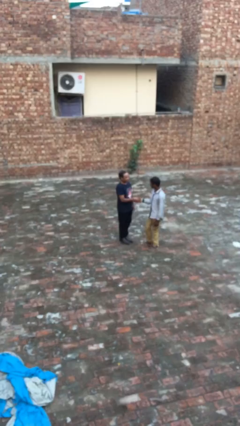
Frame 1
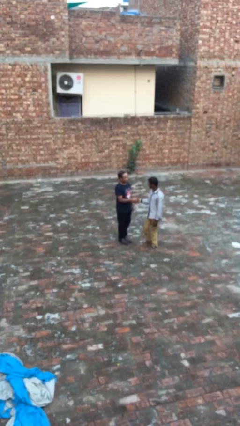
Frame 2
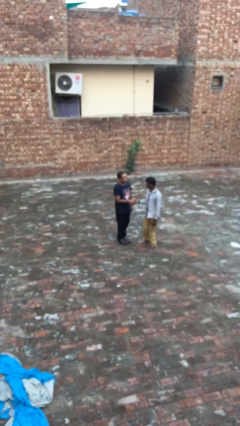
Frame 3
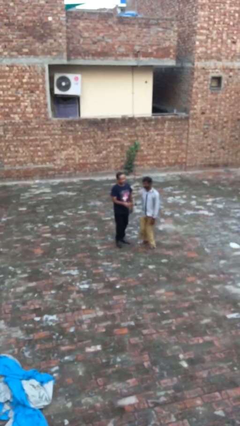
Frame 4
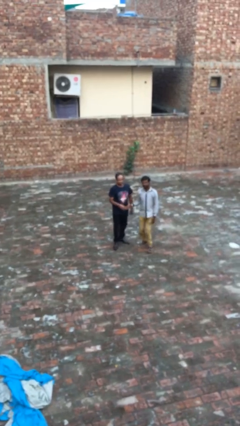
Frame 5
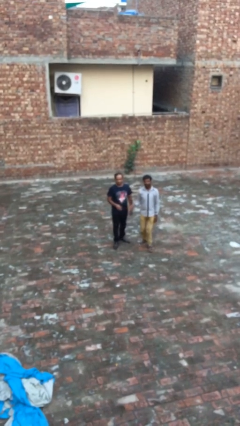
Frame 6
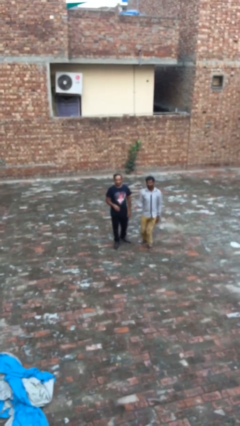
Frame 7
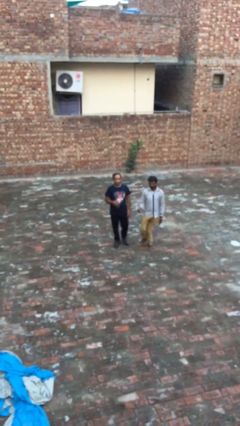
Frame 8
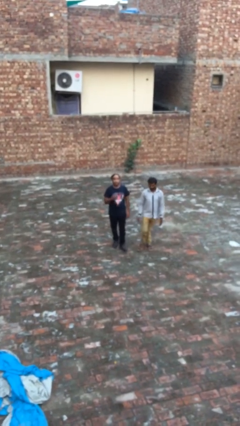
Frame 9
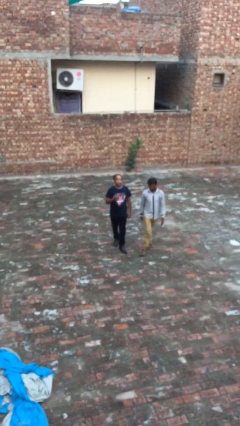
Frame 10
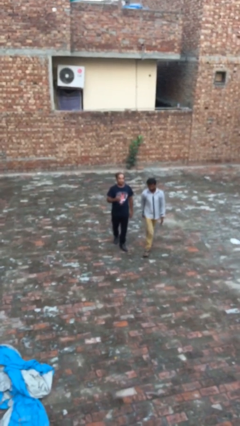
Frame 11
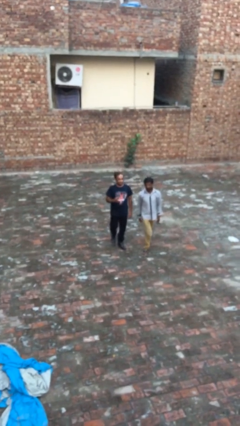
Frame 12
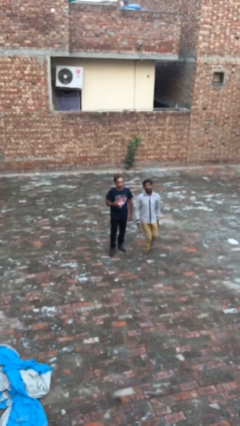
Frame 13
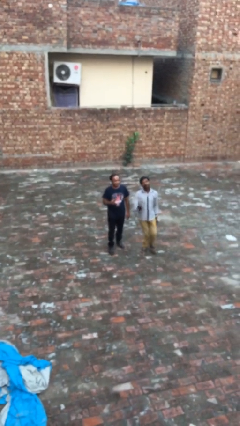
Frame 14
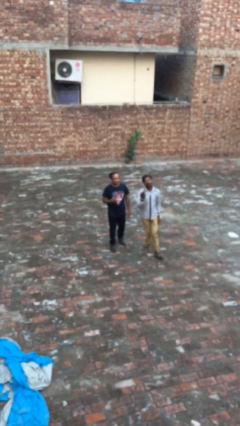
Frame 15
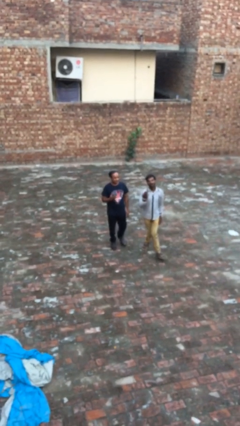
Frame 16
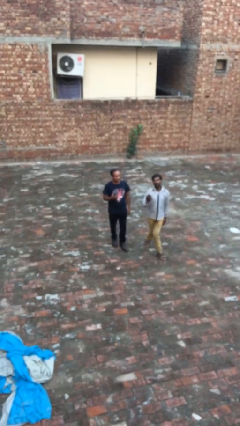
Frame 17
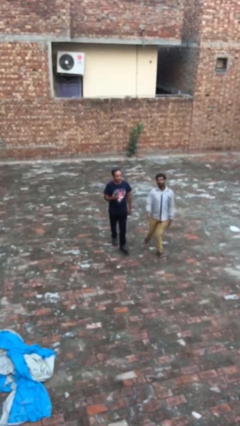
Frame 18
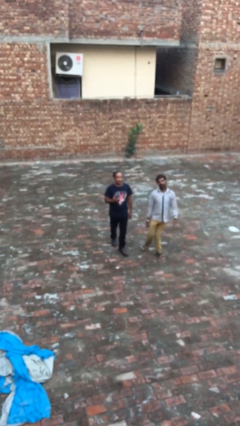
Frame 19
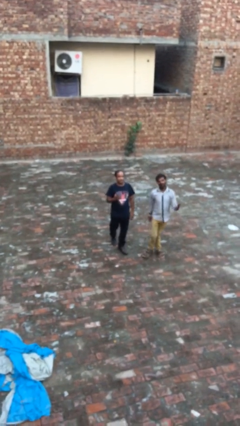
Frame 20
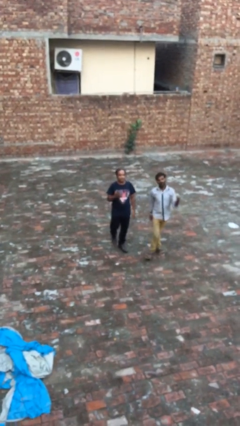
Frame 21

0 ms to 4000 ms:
person talks to person

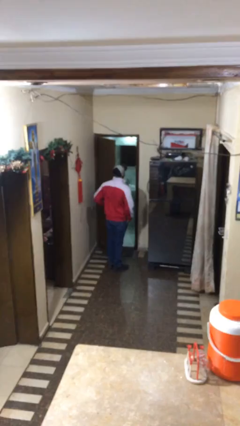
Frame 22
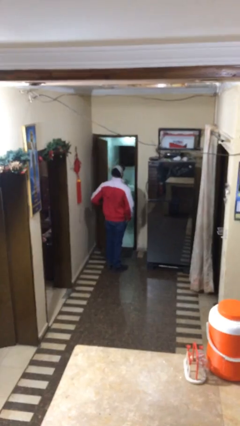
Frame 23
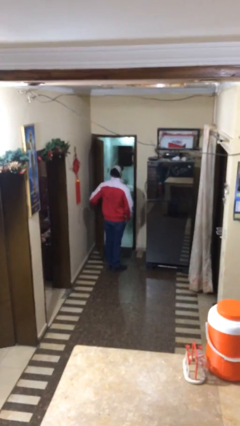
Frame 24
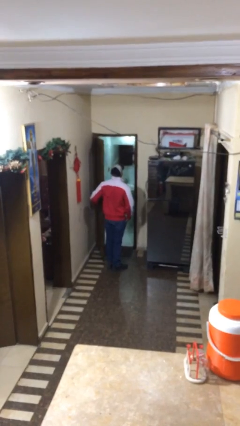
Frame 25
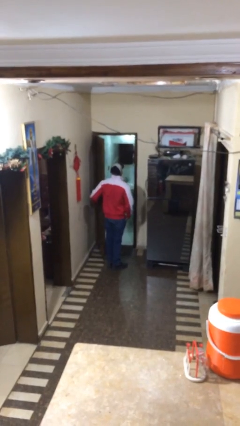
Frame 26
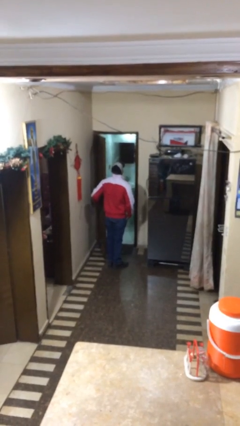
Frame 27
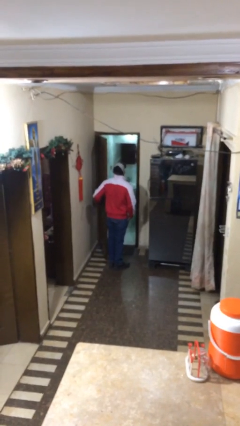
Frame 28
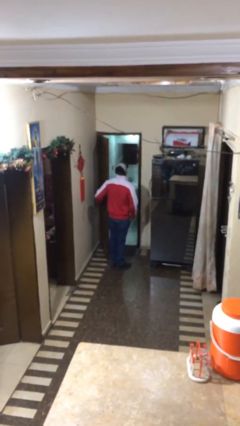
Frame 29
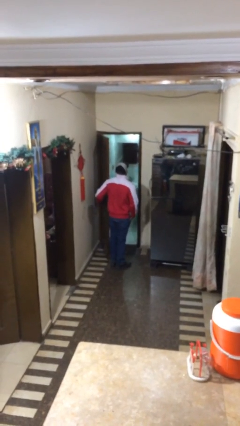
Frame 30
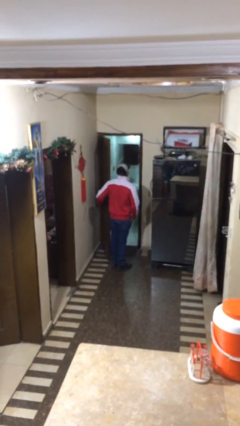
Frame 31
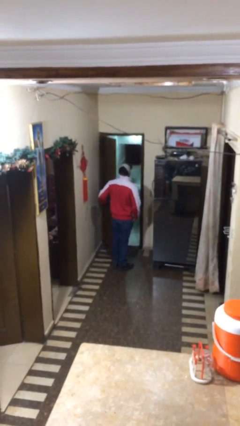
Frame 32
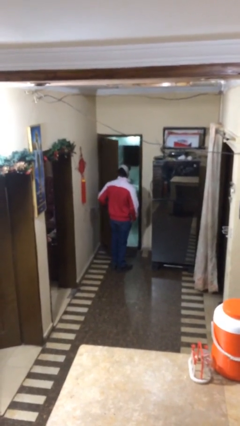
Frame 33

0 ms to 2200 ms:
person opens facility door

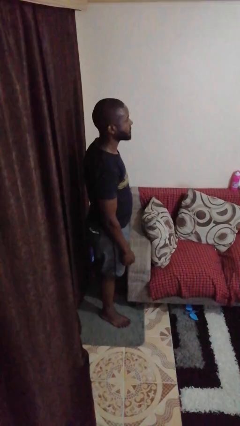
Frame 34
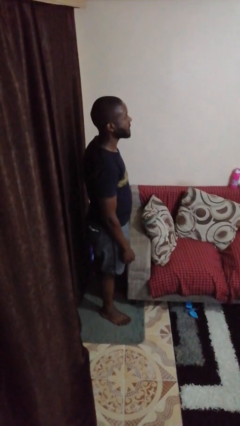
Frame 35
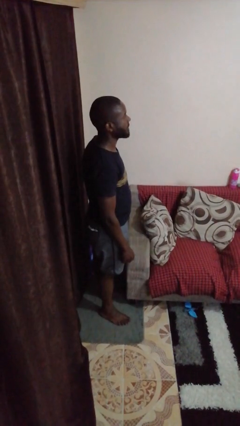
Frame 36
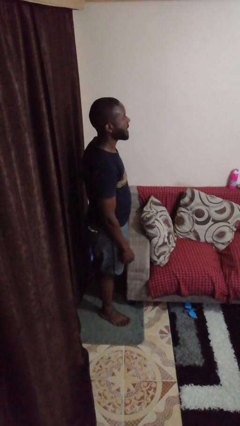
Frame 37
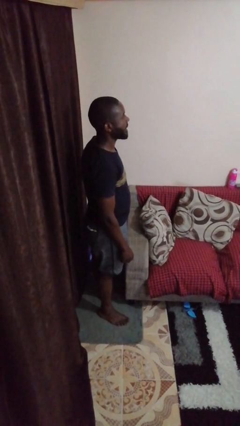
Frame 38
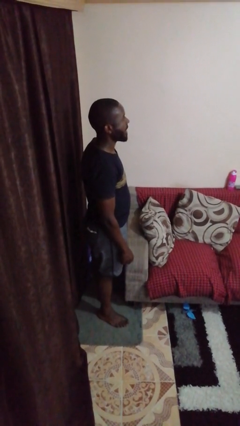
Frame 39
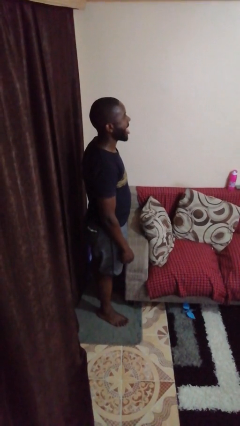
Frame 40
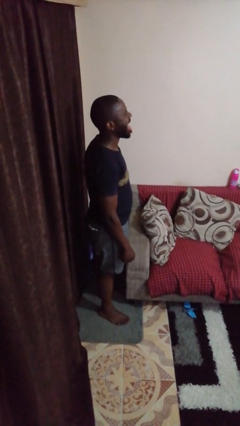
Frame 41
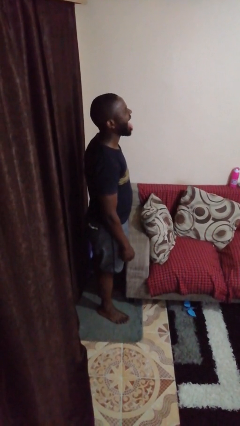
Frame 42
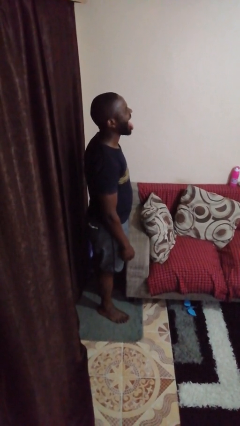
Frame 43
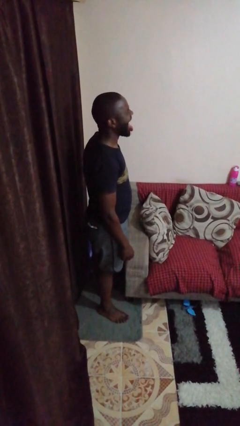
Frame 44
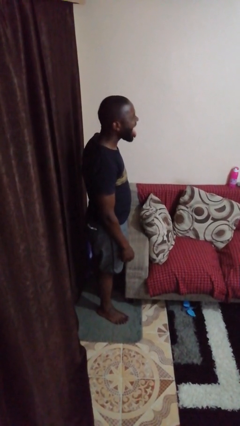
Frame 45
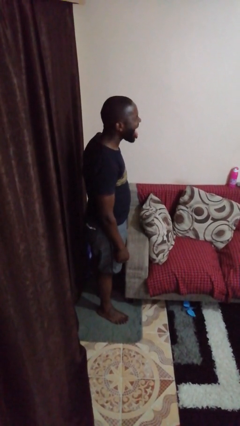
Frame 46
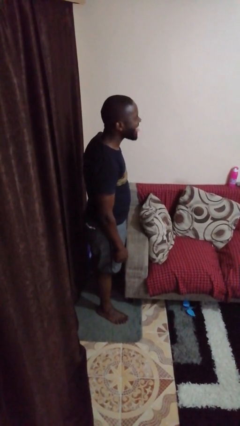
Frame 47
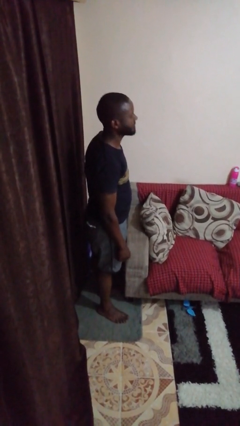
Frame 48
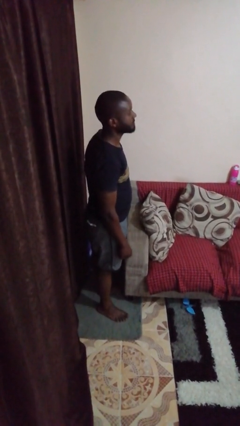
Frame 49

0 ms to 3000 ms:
person sticks out tongue

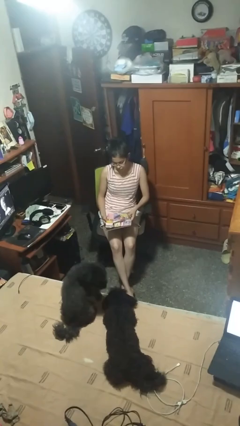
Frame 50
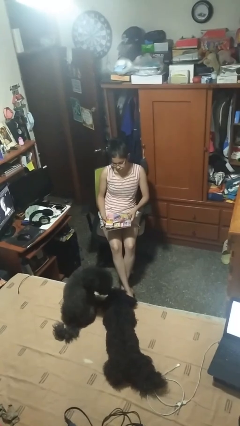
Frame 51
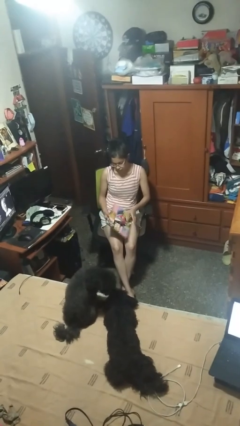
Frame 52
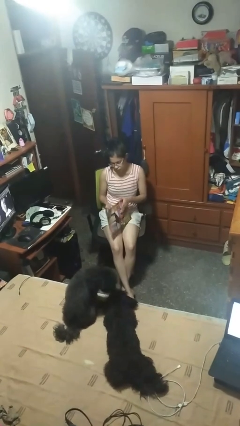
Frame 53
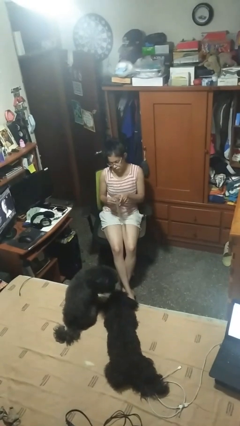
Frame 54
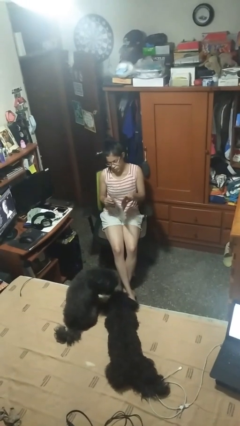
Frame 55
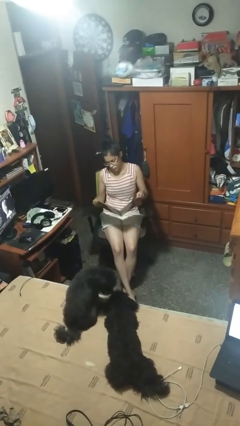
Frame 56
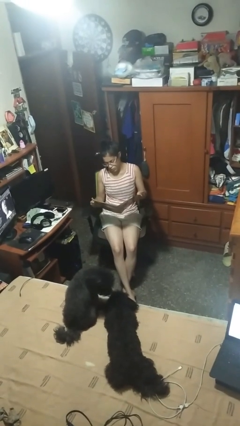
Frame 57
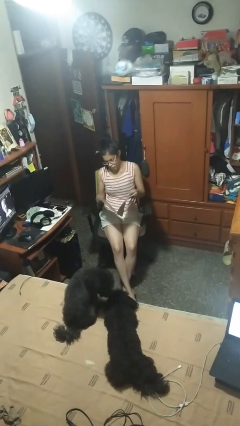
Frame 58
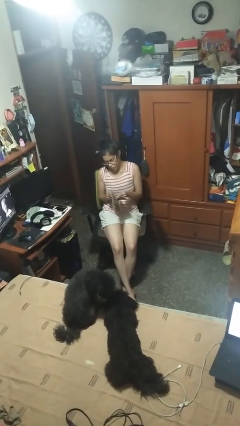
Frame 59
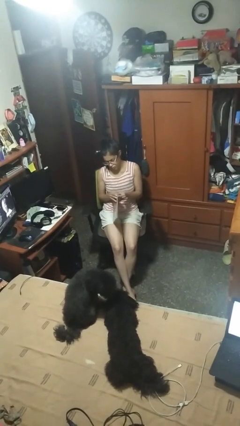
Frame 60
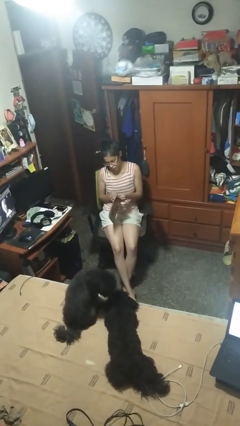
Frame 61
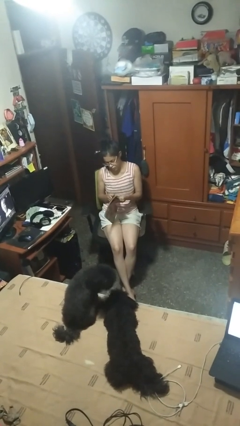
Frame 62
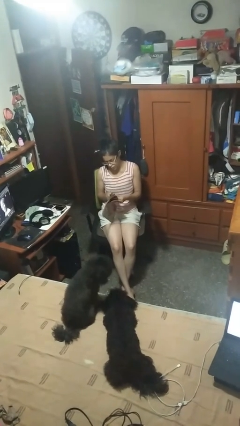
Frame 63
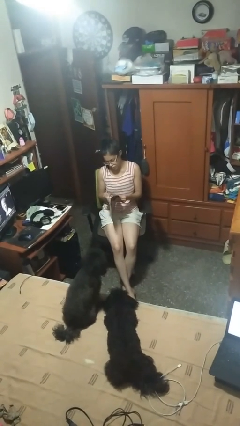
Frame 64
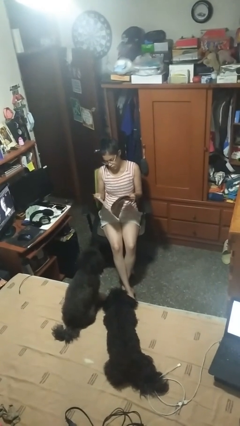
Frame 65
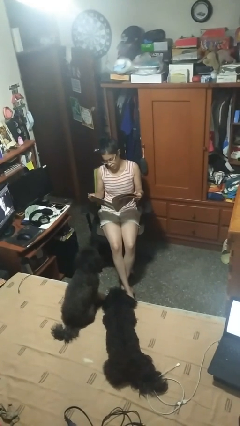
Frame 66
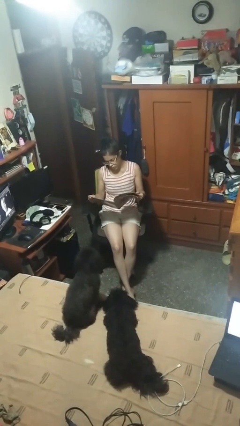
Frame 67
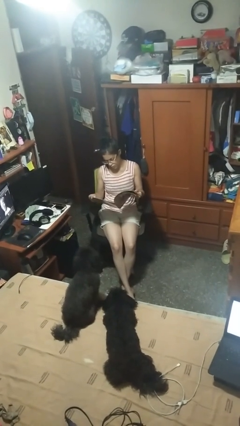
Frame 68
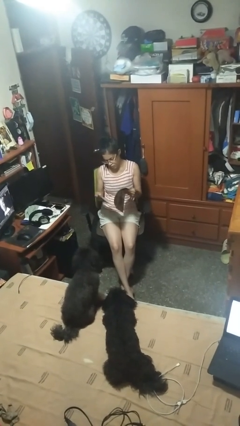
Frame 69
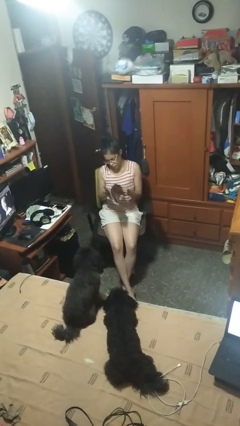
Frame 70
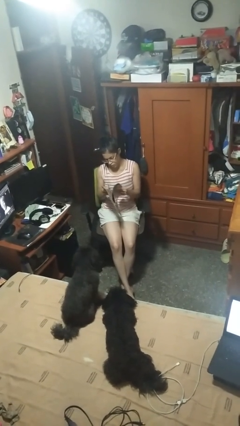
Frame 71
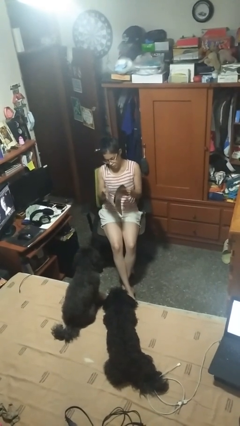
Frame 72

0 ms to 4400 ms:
person reads magazine

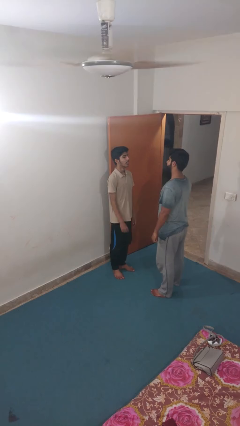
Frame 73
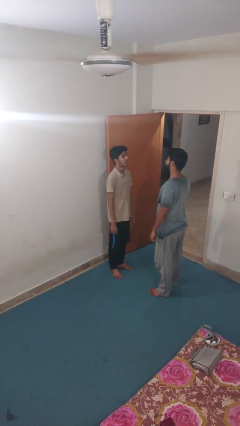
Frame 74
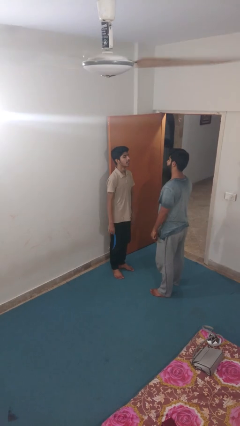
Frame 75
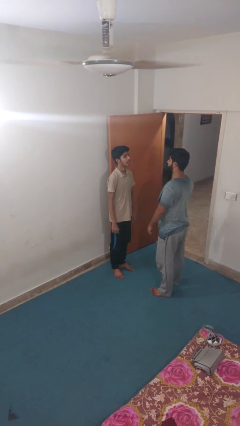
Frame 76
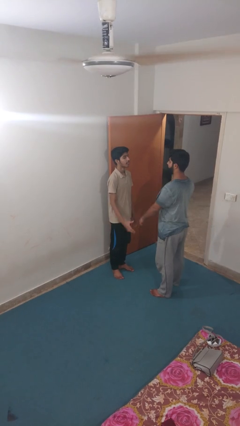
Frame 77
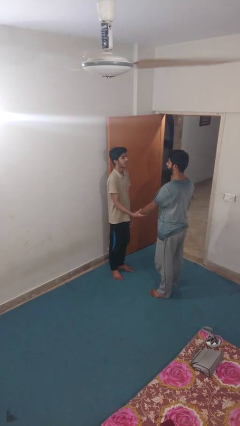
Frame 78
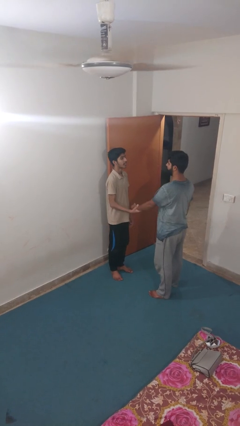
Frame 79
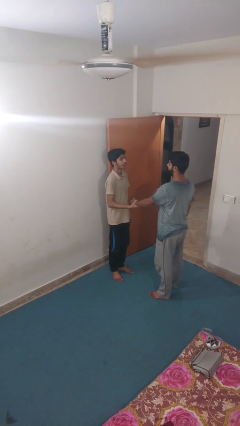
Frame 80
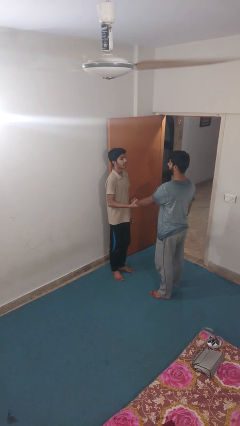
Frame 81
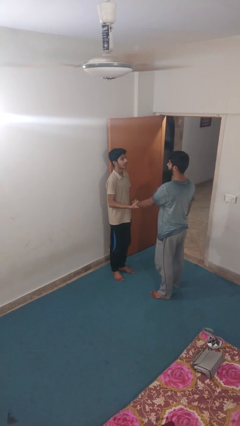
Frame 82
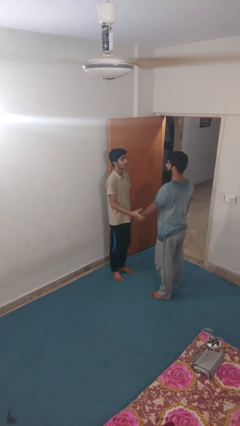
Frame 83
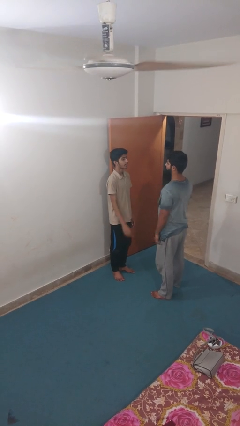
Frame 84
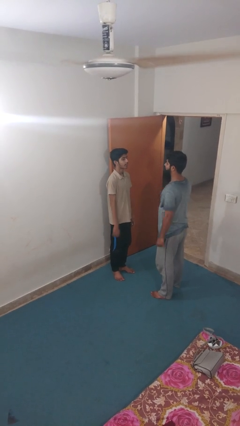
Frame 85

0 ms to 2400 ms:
person grabs person by forearm

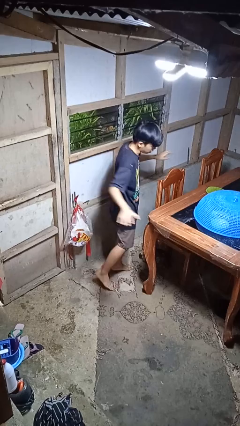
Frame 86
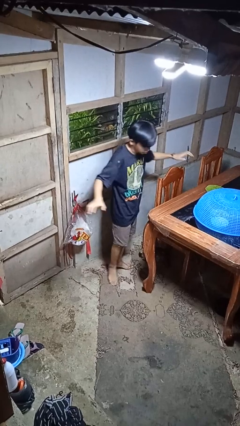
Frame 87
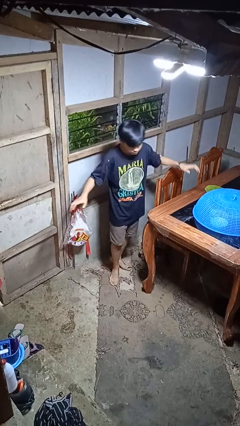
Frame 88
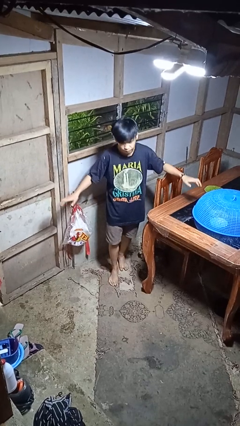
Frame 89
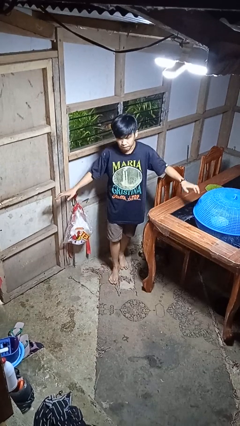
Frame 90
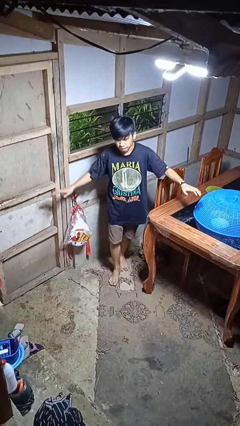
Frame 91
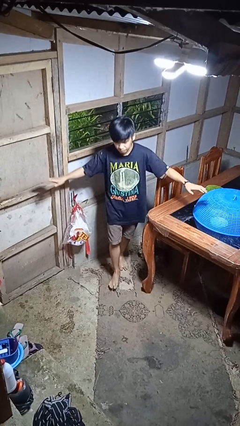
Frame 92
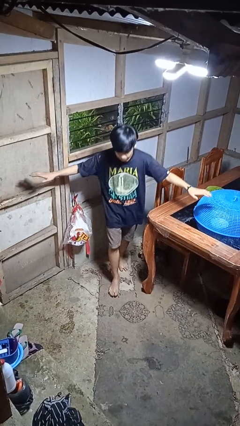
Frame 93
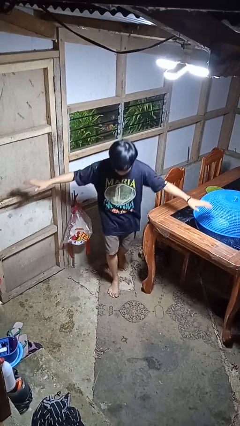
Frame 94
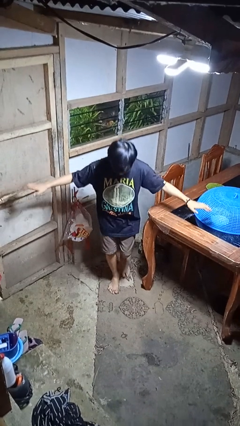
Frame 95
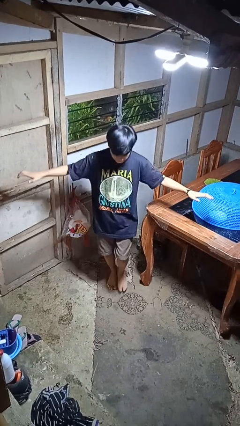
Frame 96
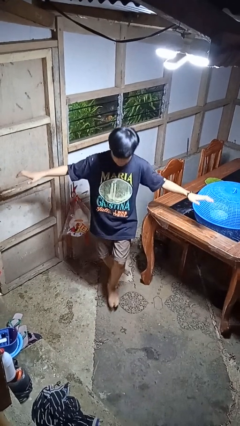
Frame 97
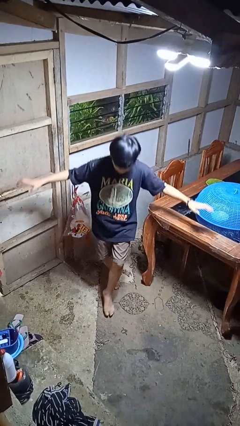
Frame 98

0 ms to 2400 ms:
person walks tiptoe
